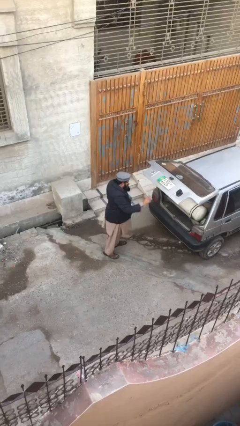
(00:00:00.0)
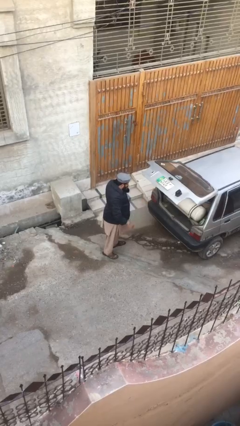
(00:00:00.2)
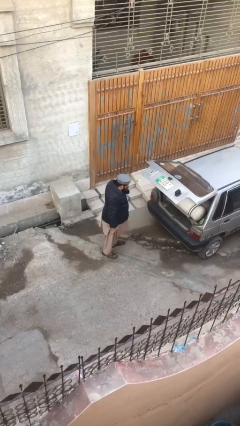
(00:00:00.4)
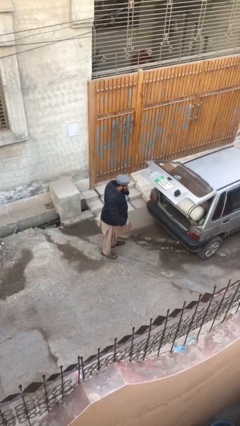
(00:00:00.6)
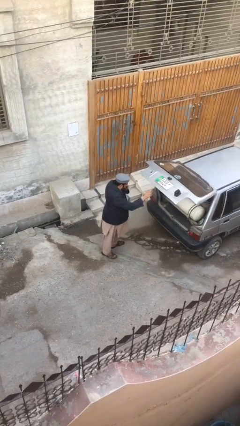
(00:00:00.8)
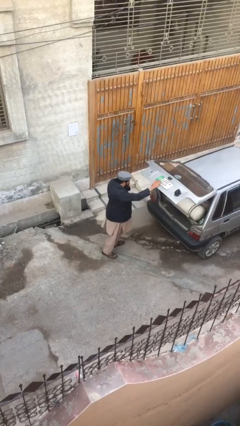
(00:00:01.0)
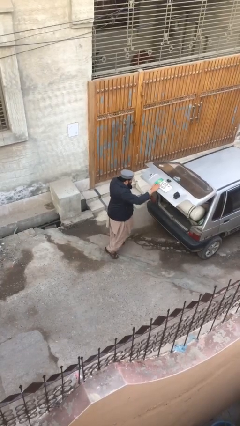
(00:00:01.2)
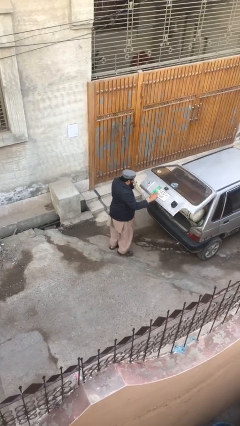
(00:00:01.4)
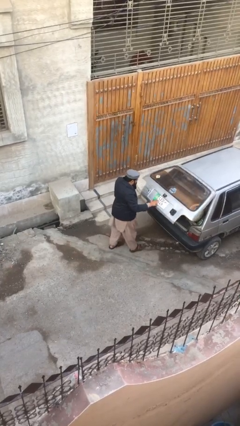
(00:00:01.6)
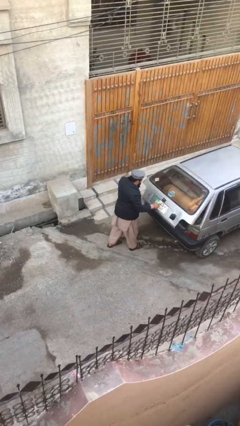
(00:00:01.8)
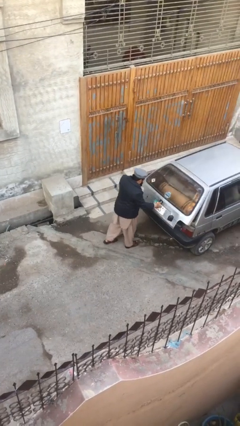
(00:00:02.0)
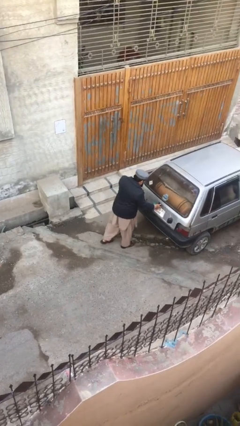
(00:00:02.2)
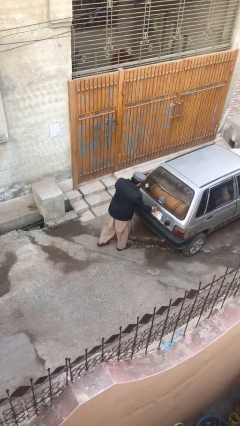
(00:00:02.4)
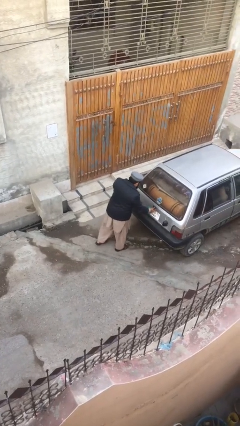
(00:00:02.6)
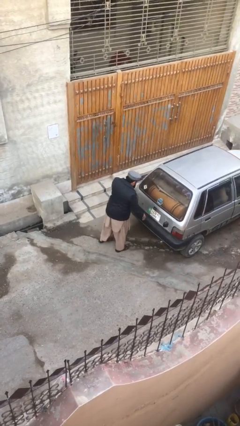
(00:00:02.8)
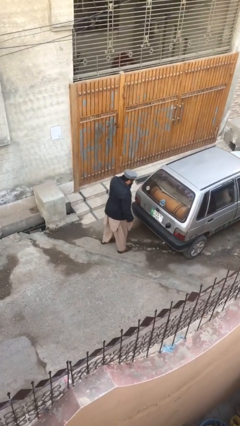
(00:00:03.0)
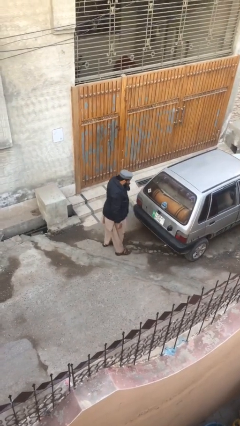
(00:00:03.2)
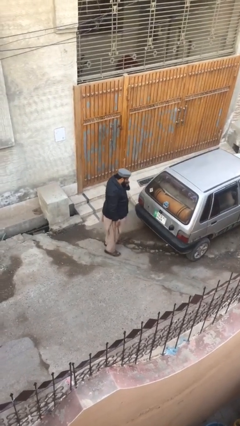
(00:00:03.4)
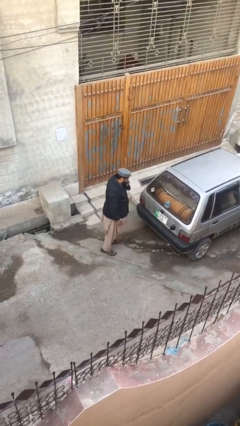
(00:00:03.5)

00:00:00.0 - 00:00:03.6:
person closes car trunk

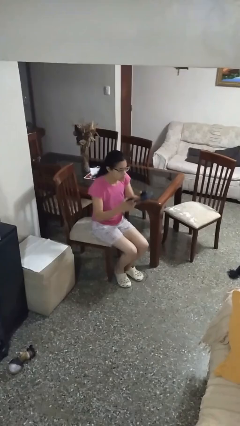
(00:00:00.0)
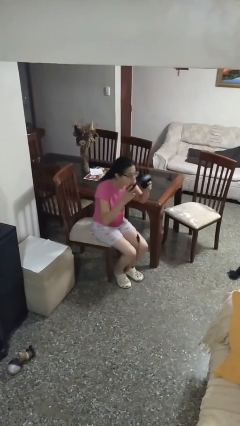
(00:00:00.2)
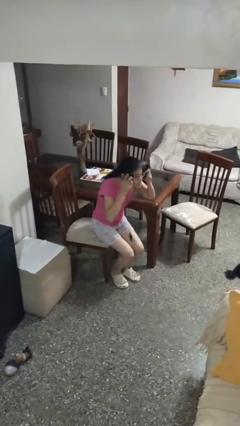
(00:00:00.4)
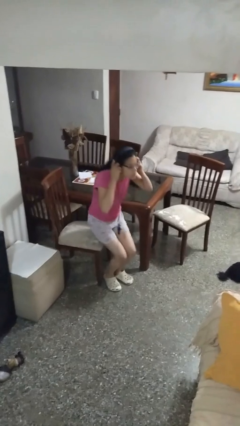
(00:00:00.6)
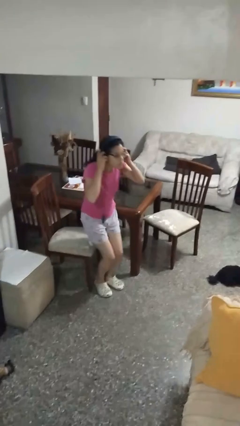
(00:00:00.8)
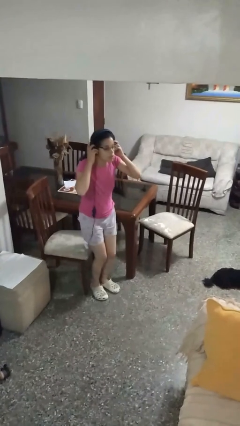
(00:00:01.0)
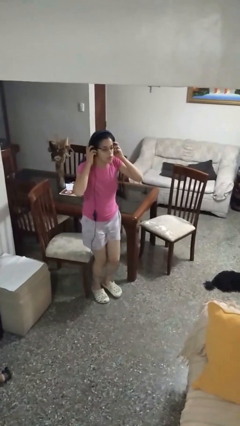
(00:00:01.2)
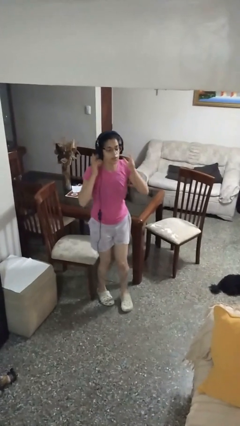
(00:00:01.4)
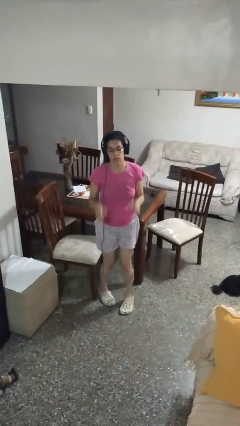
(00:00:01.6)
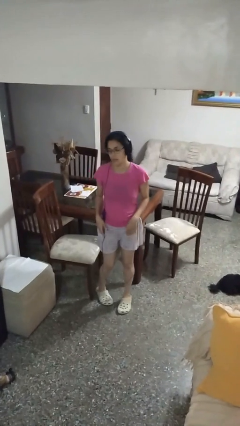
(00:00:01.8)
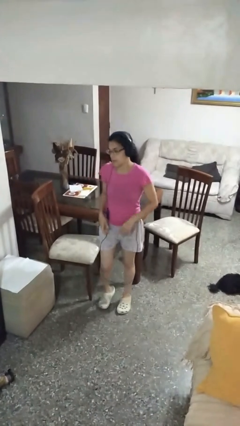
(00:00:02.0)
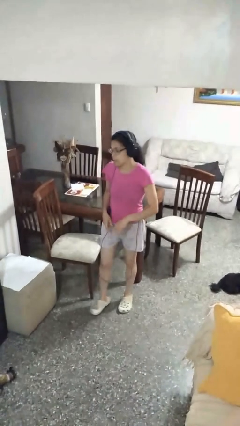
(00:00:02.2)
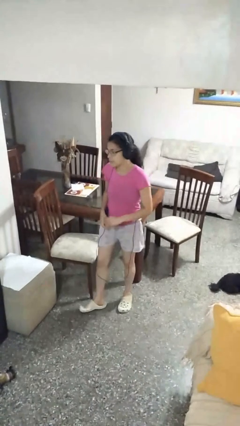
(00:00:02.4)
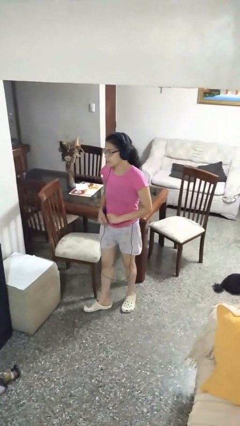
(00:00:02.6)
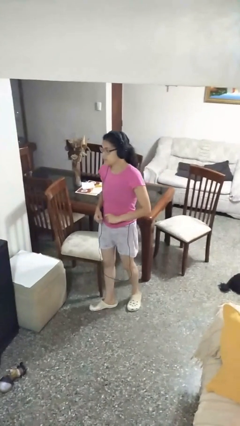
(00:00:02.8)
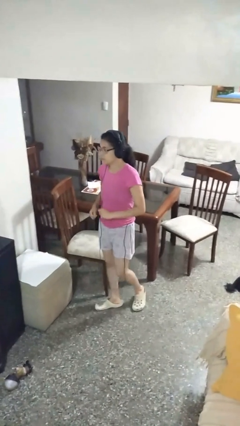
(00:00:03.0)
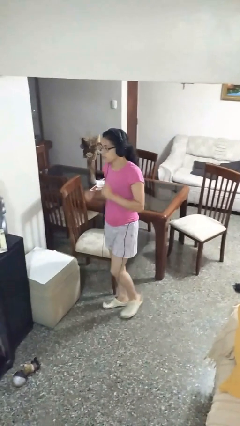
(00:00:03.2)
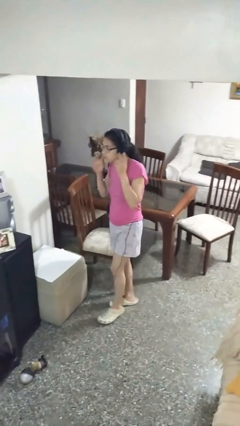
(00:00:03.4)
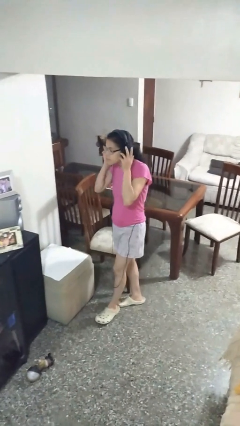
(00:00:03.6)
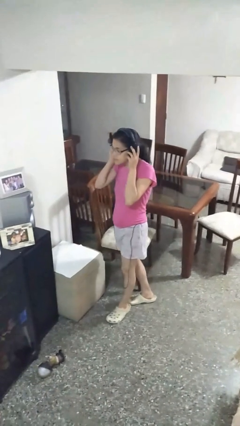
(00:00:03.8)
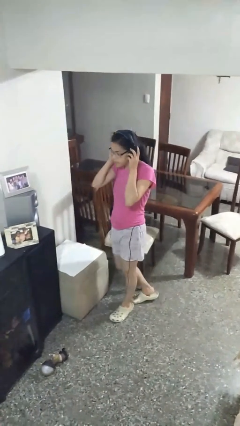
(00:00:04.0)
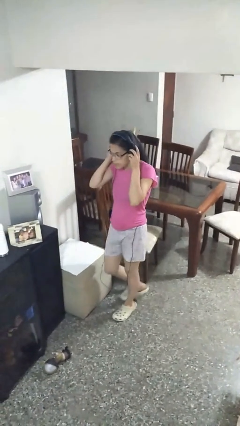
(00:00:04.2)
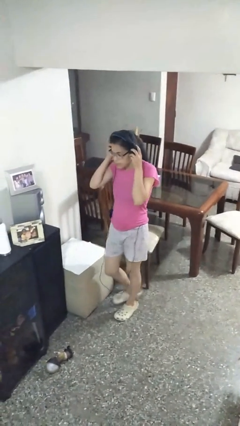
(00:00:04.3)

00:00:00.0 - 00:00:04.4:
person puts on headphones

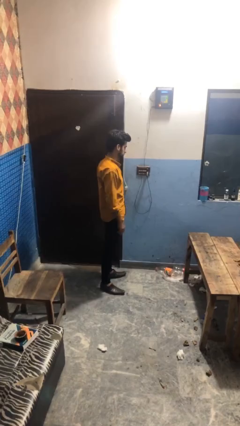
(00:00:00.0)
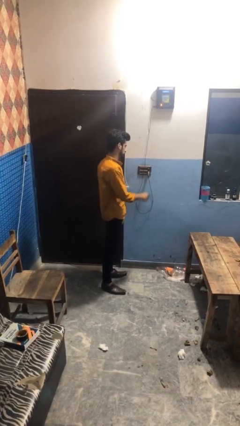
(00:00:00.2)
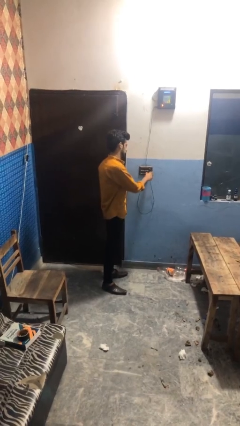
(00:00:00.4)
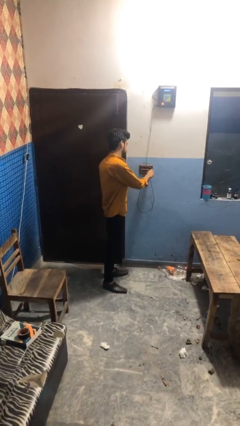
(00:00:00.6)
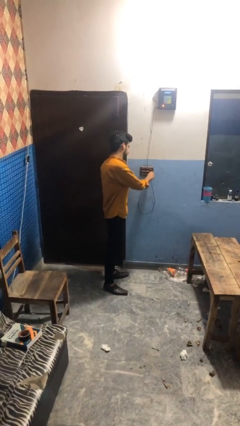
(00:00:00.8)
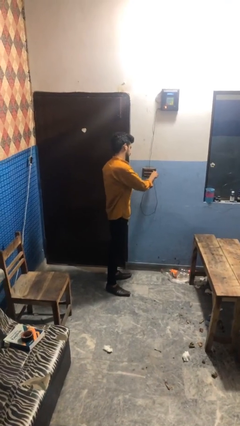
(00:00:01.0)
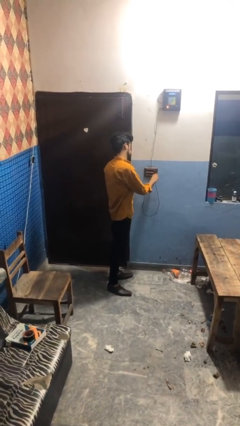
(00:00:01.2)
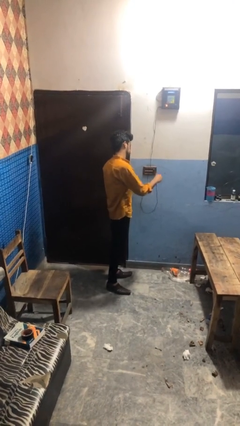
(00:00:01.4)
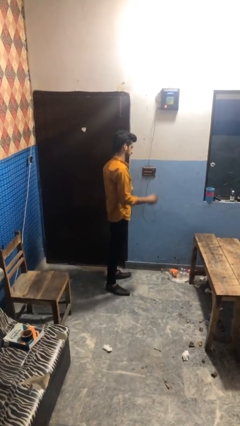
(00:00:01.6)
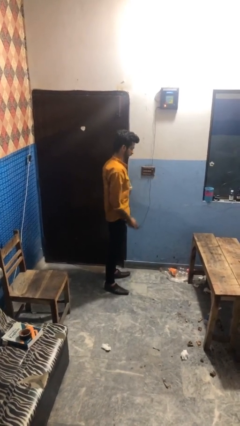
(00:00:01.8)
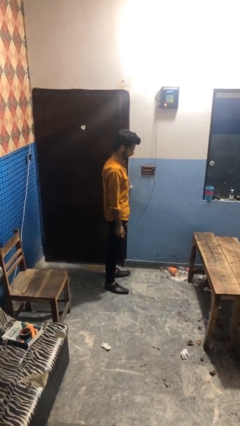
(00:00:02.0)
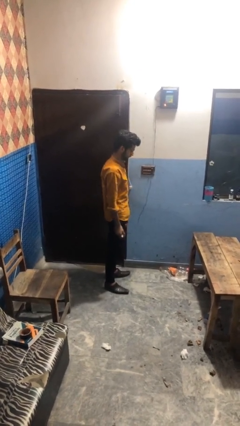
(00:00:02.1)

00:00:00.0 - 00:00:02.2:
person unplugs from electrical socket

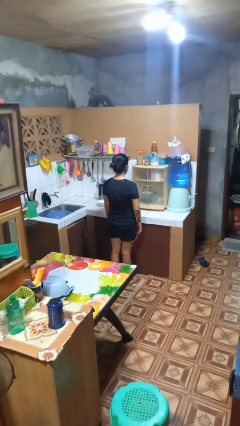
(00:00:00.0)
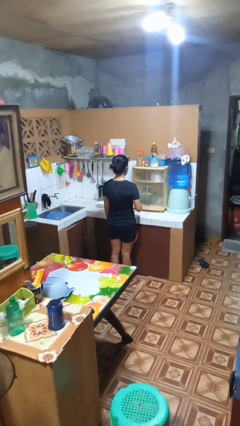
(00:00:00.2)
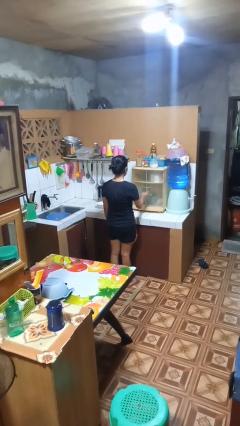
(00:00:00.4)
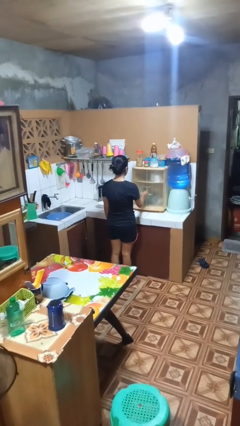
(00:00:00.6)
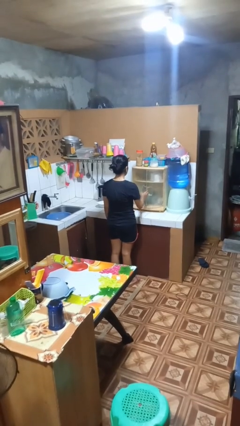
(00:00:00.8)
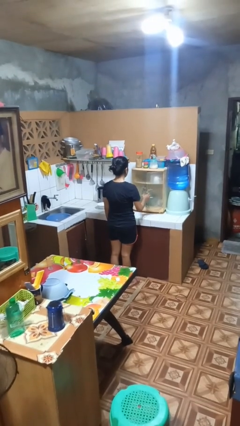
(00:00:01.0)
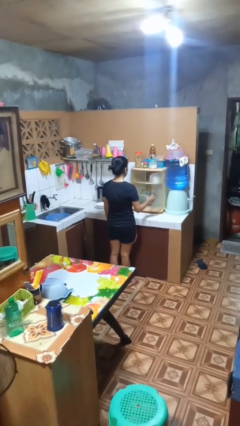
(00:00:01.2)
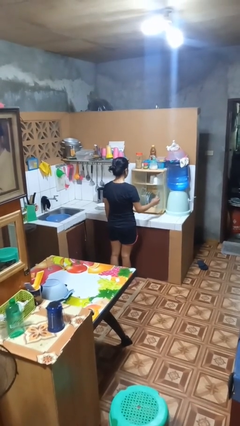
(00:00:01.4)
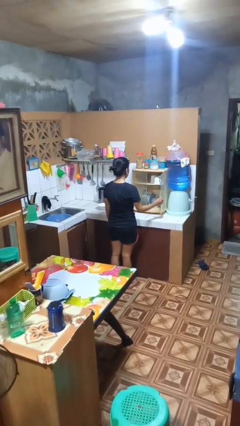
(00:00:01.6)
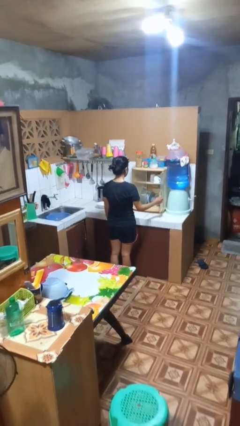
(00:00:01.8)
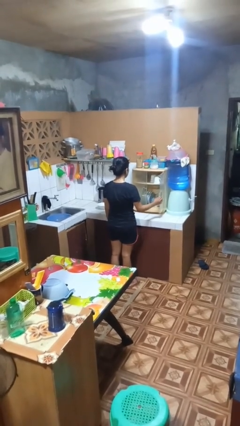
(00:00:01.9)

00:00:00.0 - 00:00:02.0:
person opens kitchen drawer

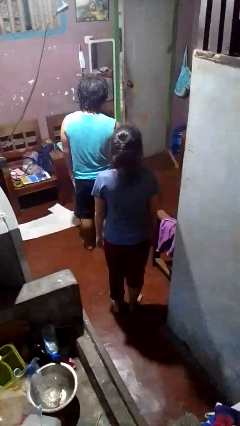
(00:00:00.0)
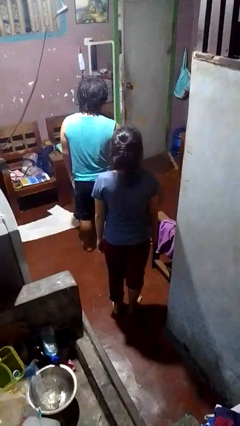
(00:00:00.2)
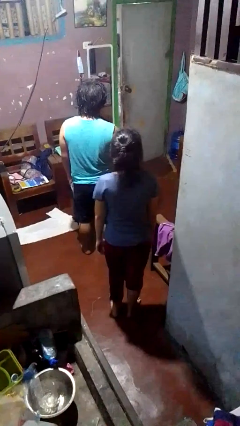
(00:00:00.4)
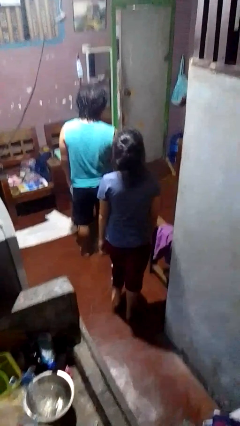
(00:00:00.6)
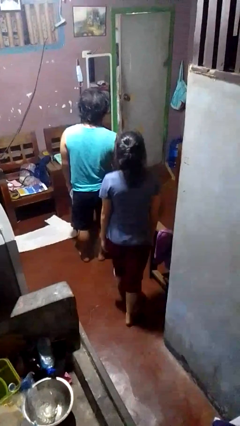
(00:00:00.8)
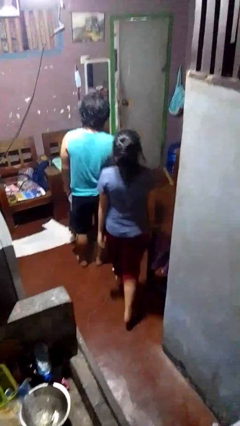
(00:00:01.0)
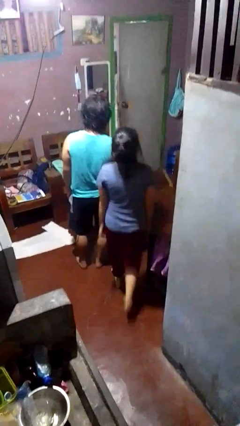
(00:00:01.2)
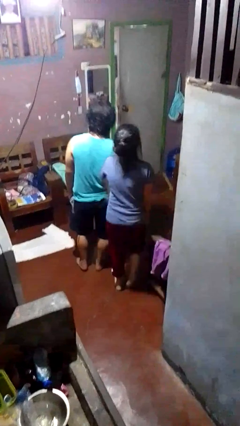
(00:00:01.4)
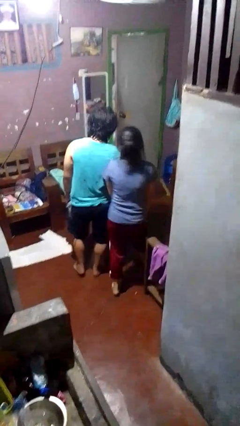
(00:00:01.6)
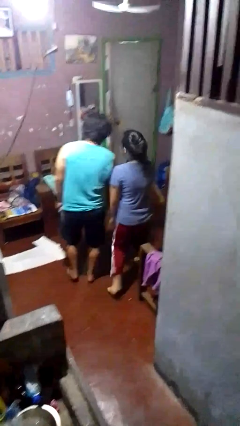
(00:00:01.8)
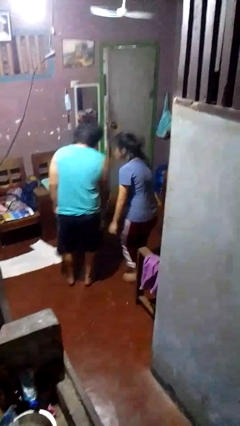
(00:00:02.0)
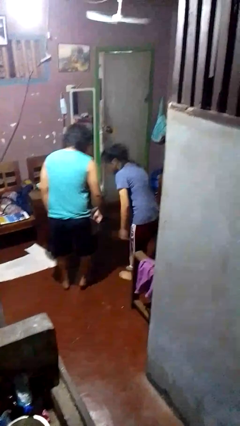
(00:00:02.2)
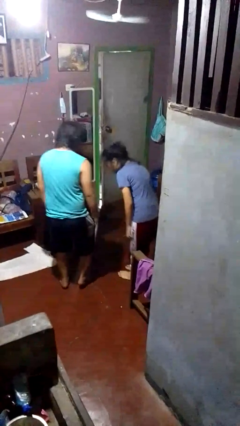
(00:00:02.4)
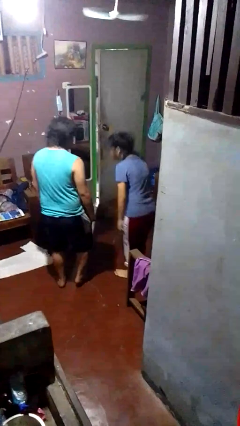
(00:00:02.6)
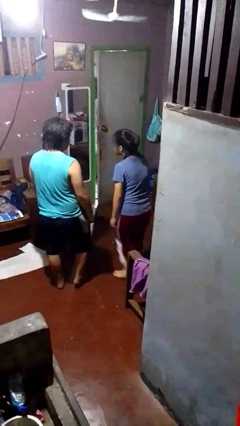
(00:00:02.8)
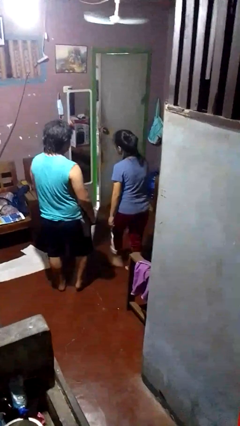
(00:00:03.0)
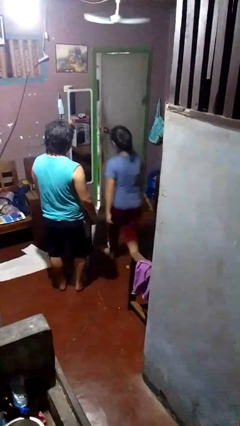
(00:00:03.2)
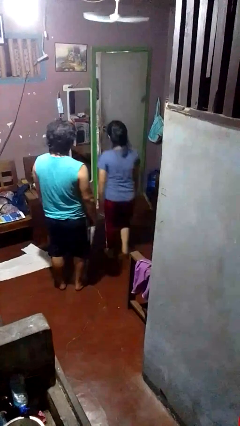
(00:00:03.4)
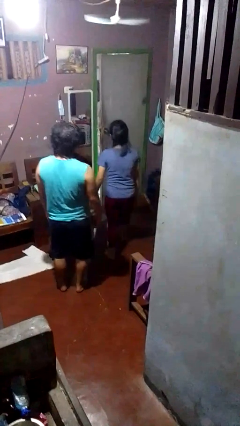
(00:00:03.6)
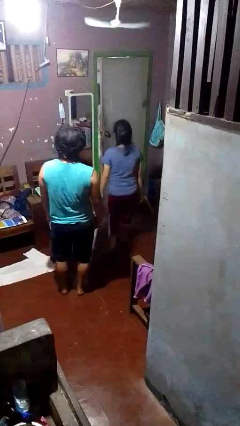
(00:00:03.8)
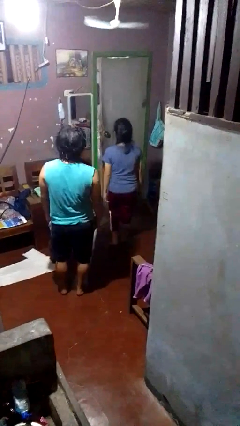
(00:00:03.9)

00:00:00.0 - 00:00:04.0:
person bumps into person

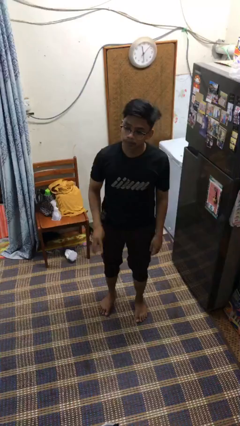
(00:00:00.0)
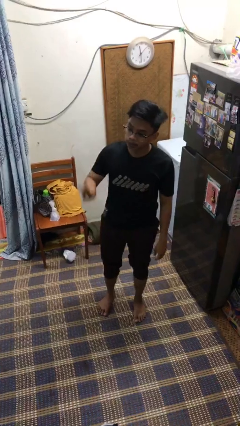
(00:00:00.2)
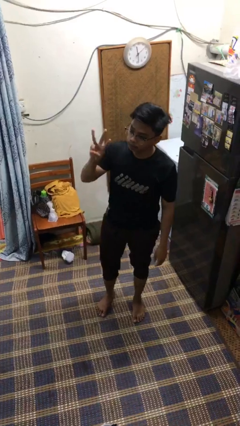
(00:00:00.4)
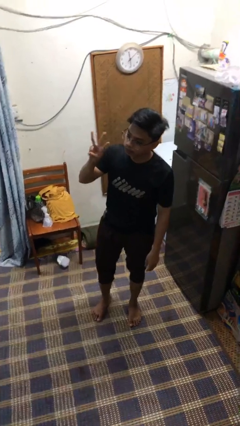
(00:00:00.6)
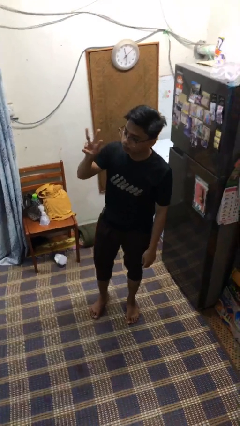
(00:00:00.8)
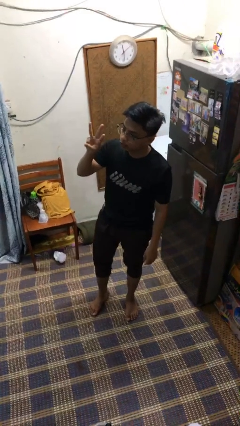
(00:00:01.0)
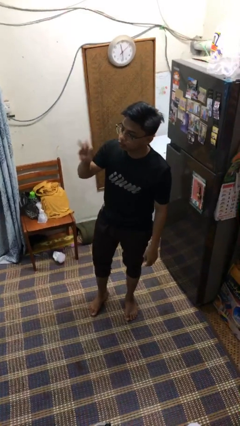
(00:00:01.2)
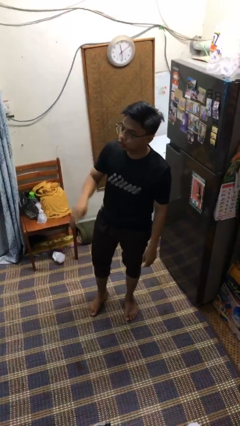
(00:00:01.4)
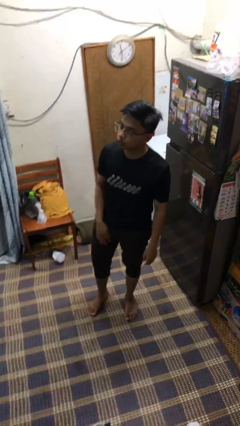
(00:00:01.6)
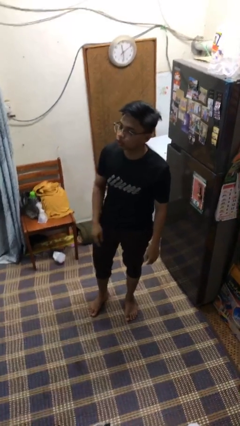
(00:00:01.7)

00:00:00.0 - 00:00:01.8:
person gestures number three
